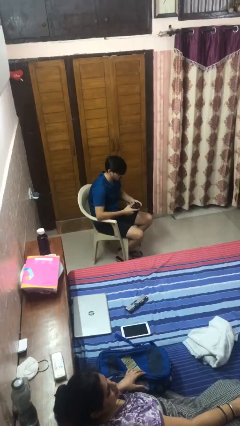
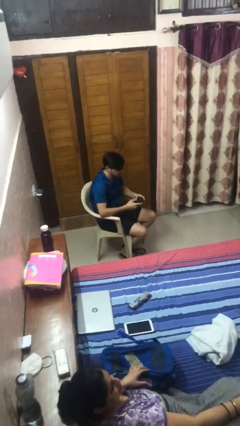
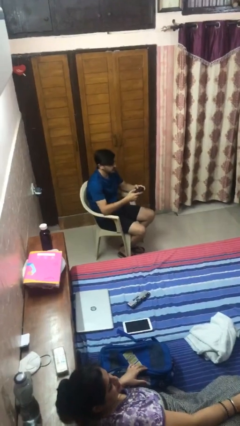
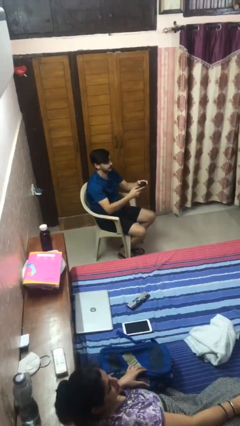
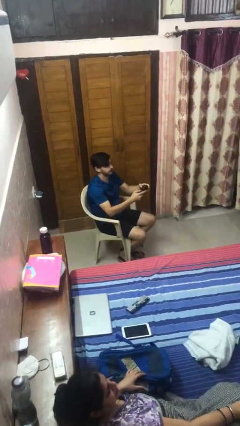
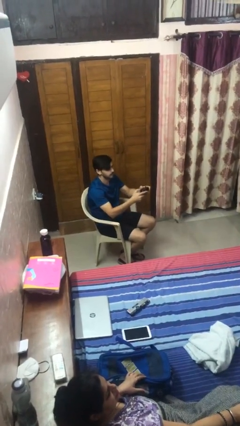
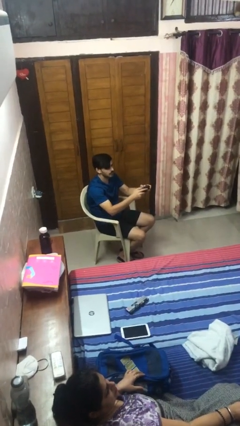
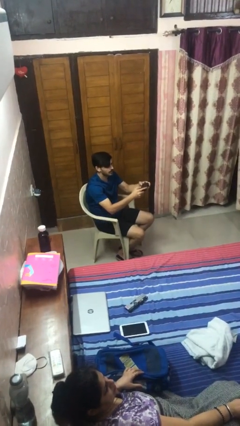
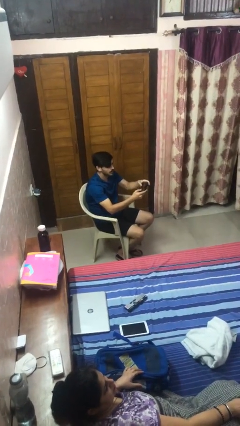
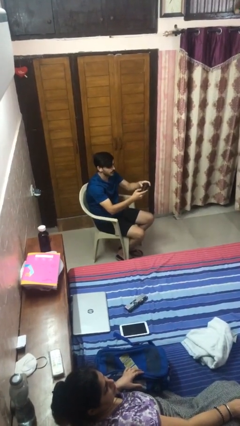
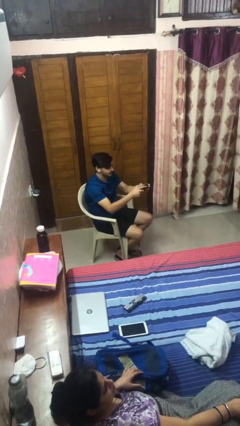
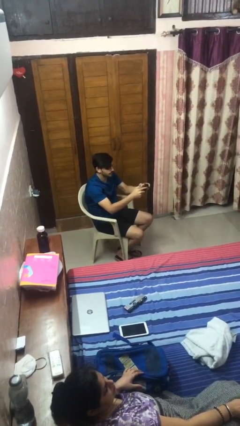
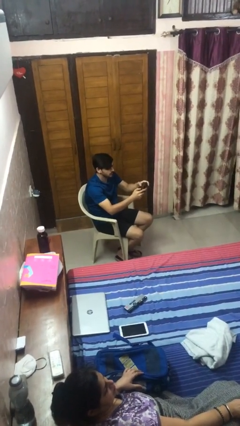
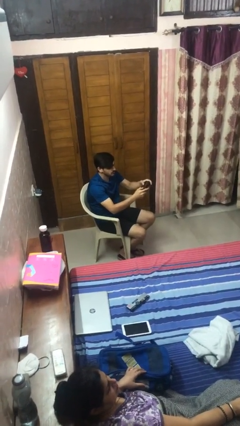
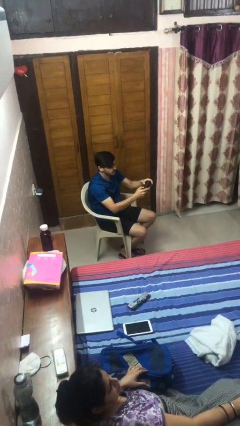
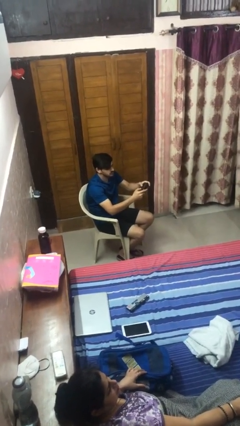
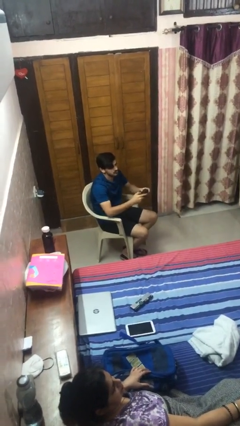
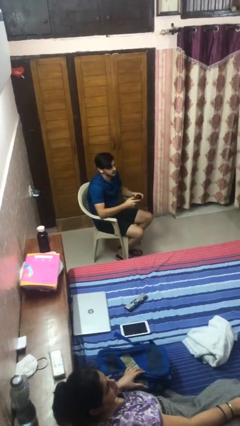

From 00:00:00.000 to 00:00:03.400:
person interacts with handheld game

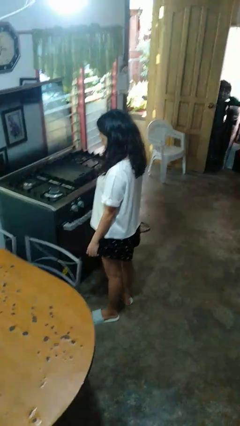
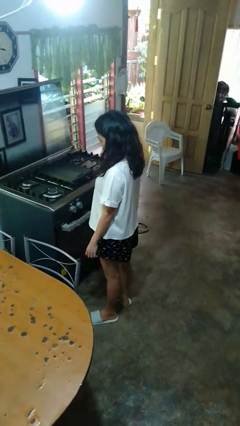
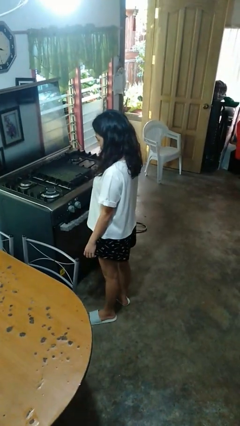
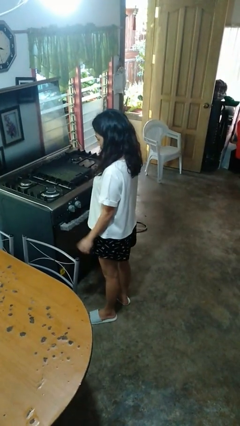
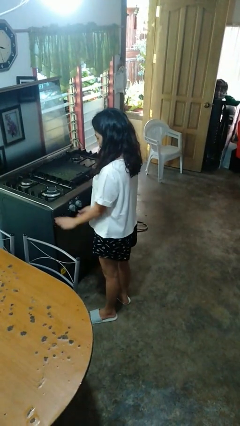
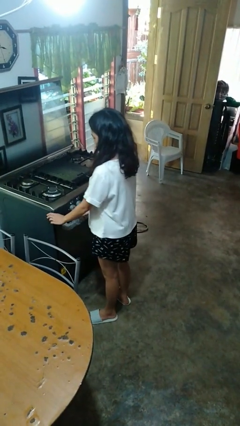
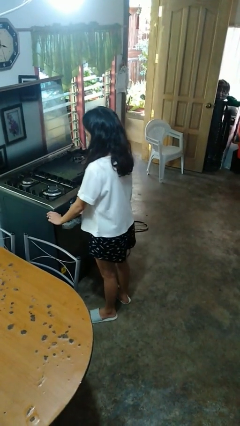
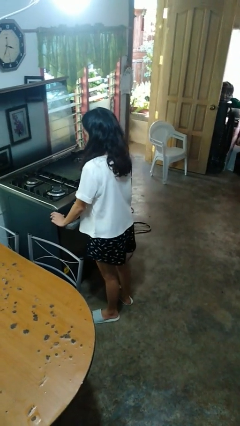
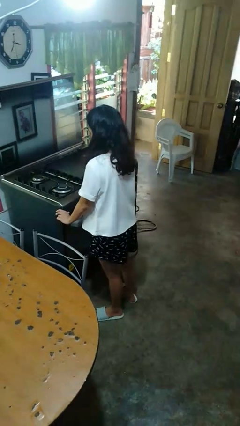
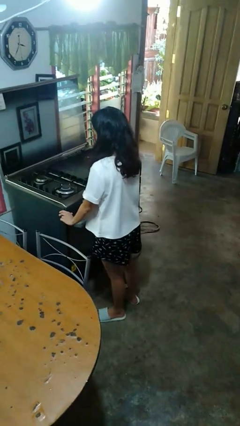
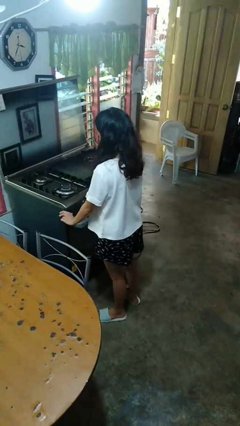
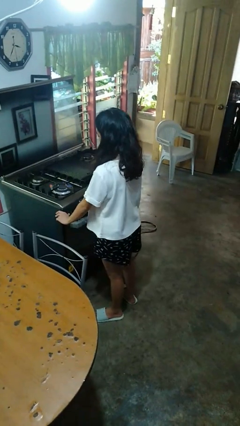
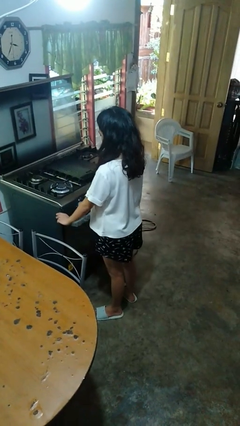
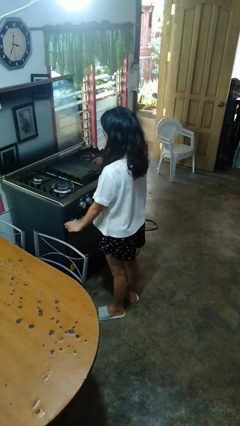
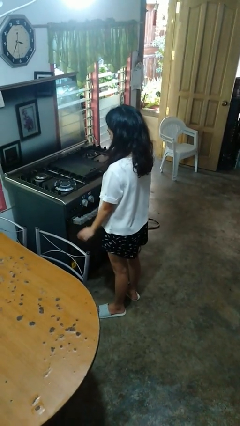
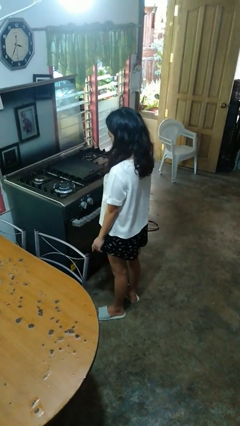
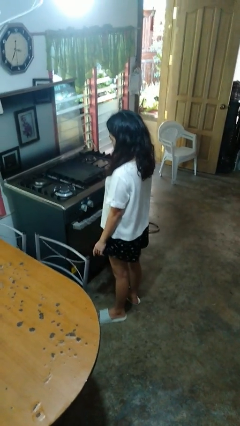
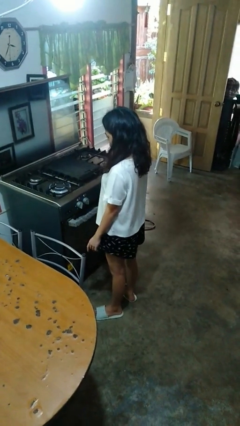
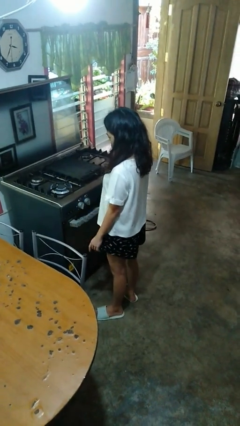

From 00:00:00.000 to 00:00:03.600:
person turns on stovetop

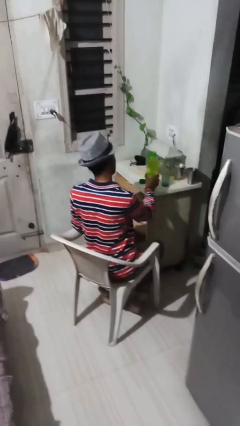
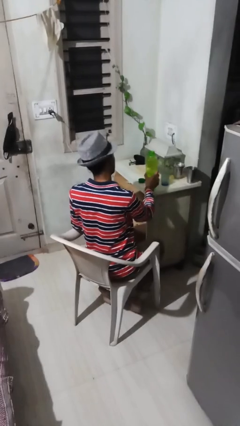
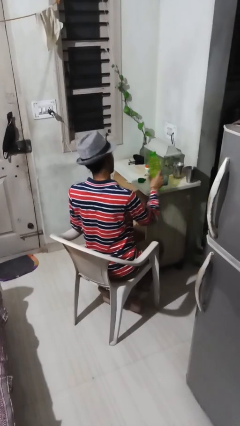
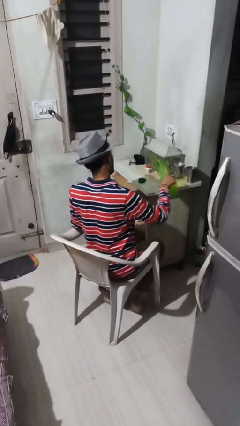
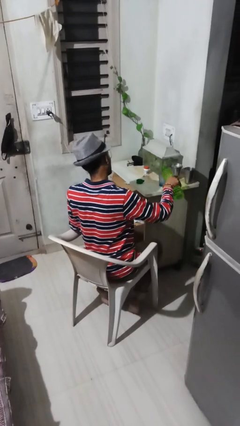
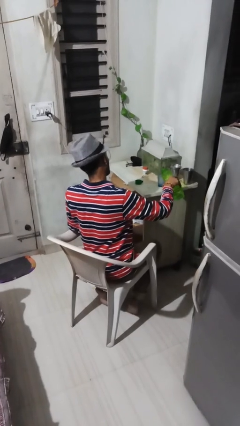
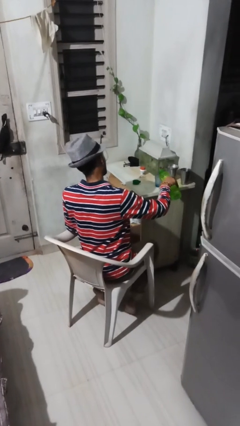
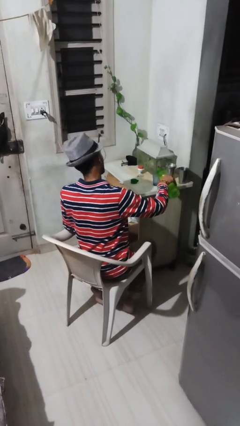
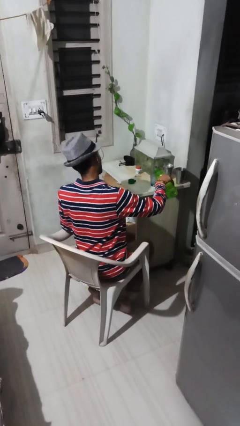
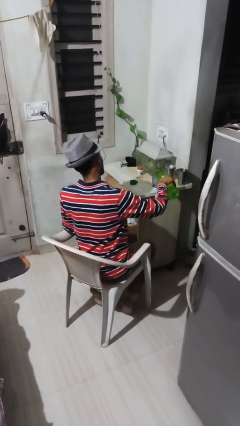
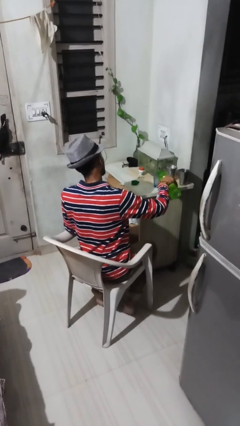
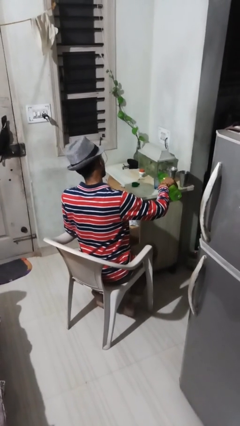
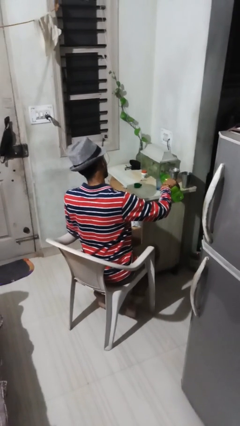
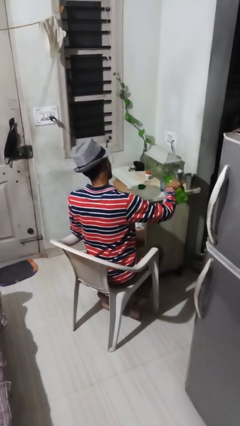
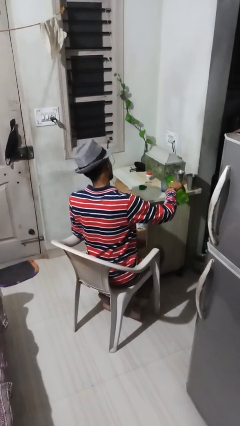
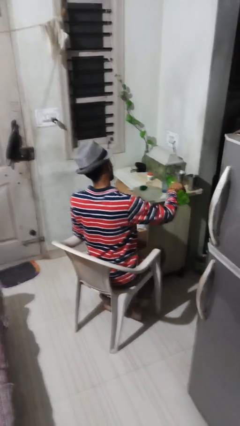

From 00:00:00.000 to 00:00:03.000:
person pours liquid into cup

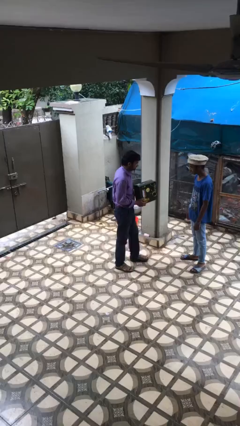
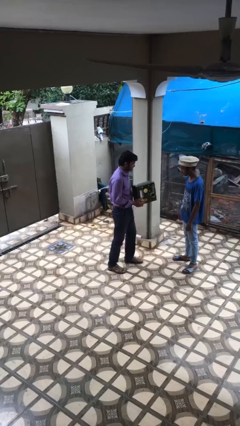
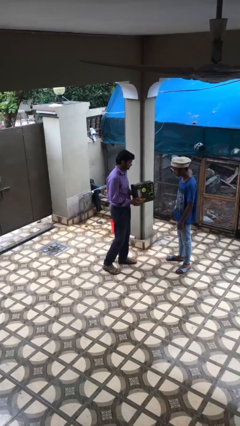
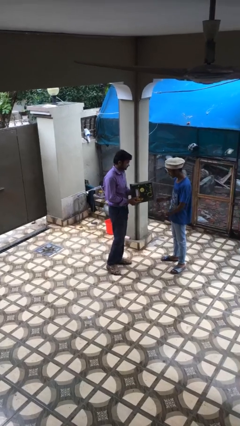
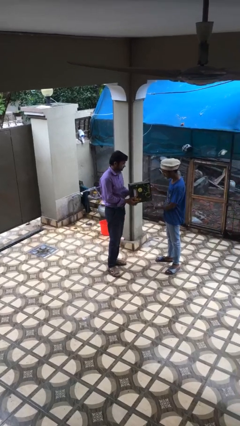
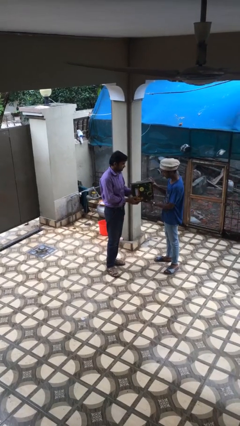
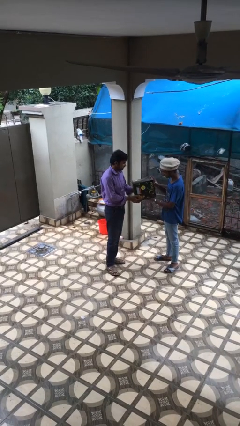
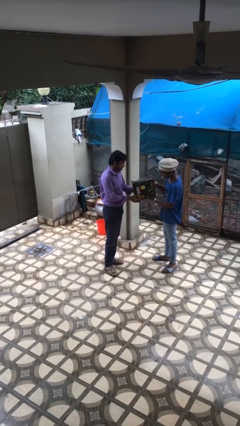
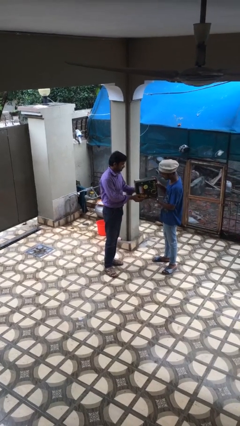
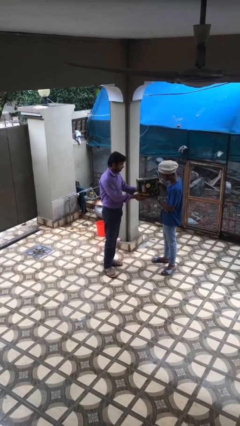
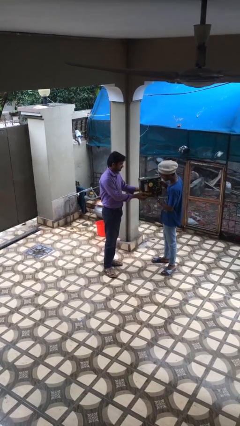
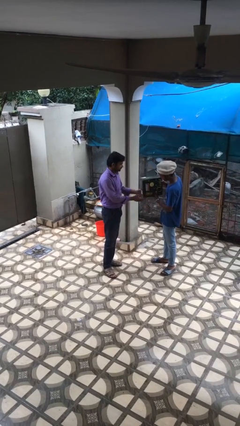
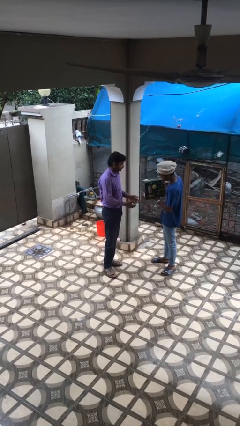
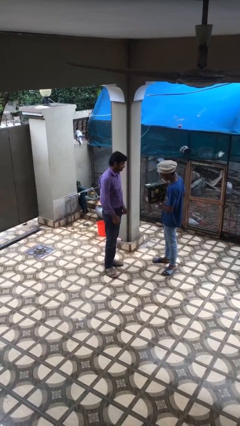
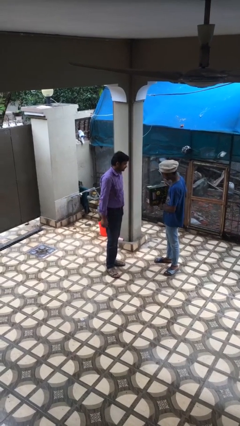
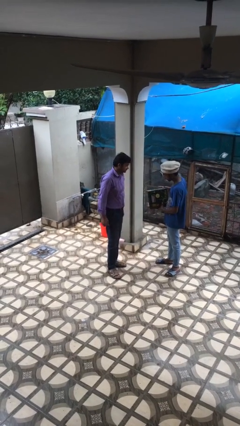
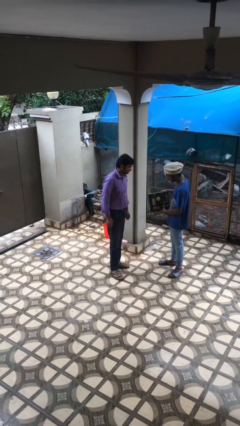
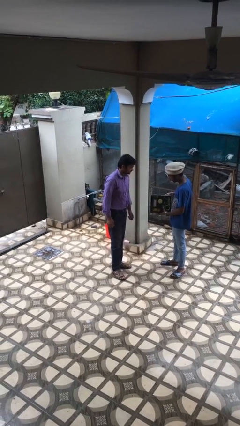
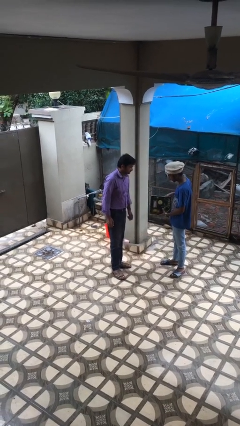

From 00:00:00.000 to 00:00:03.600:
person transfers object to person

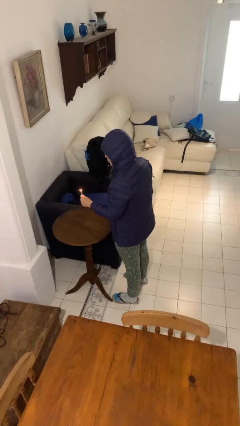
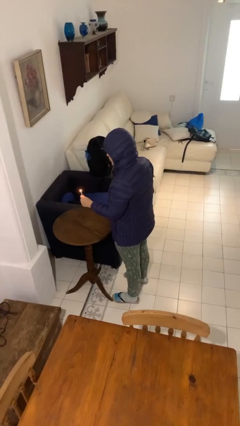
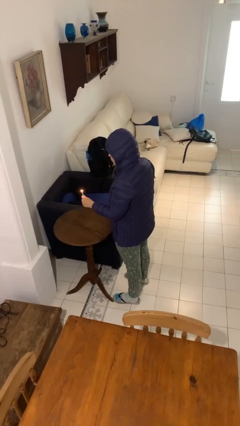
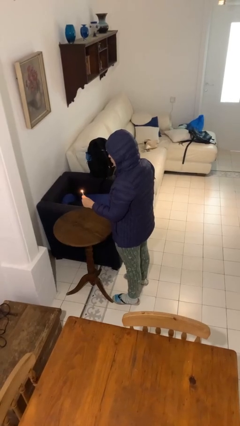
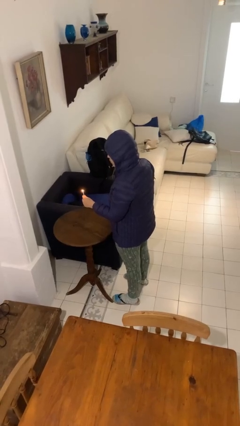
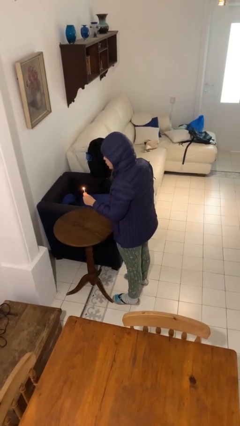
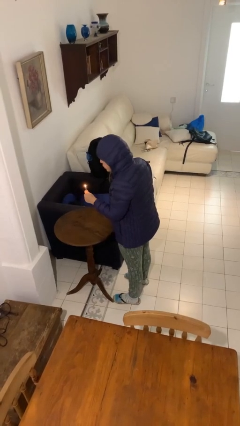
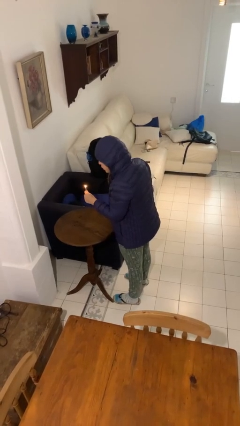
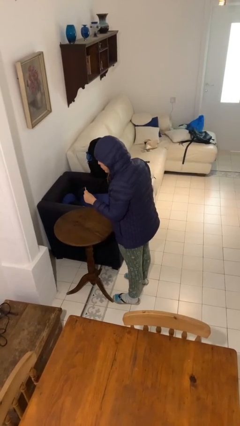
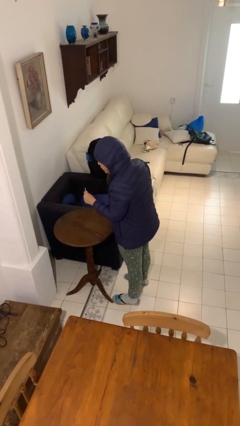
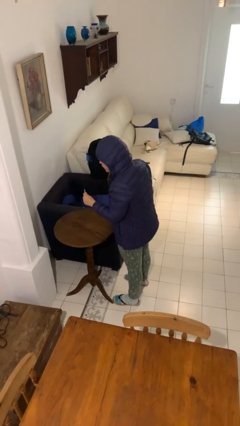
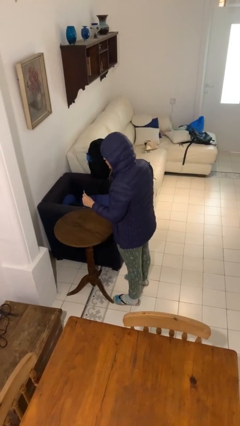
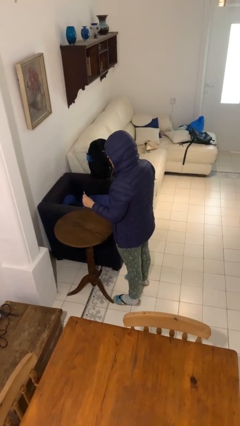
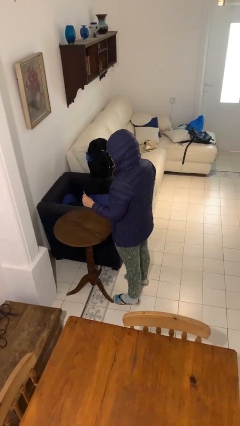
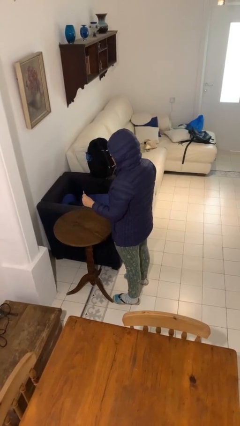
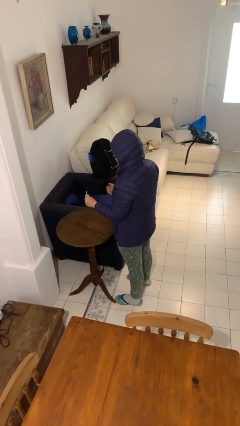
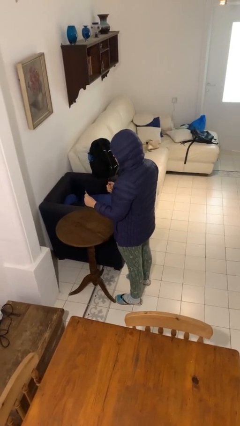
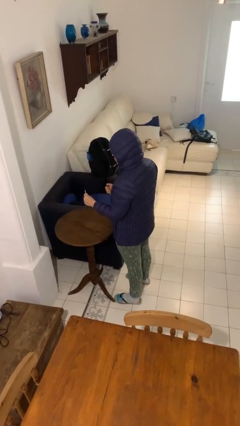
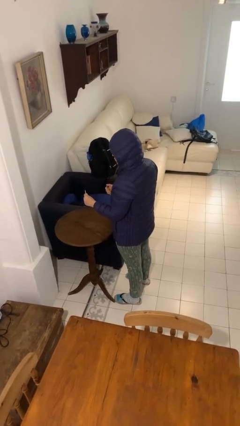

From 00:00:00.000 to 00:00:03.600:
person extinguishes candle

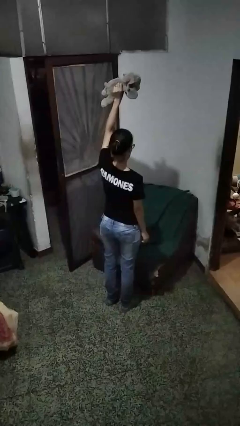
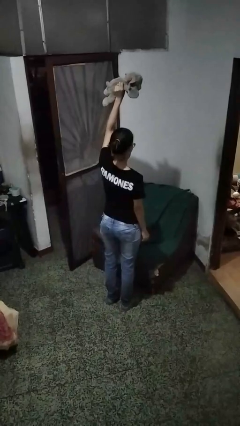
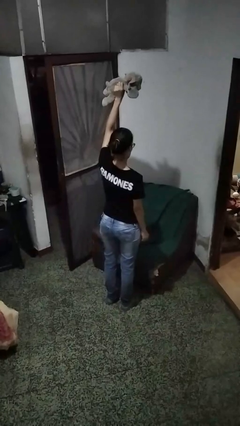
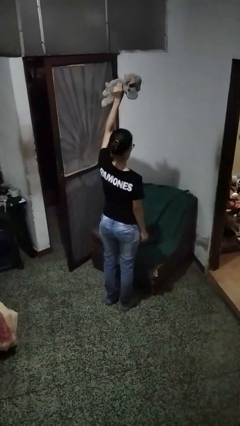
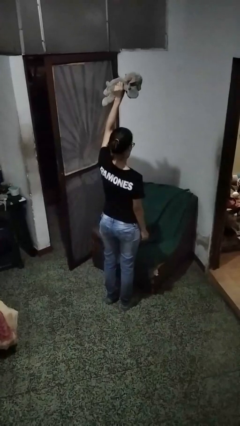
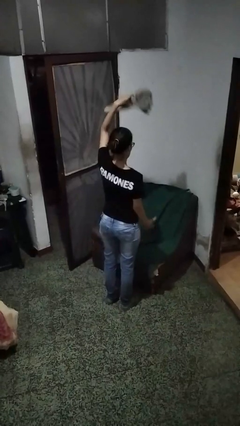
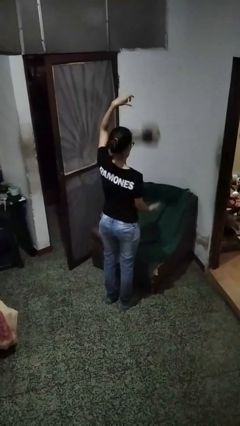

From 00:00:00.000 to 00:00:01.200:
person drops object
